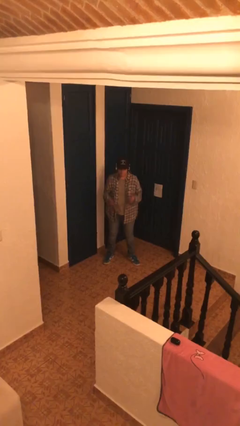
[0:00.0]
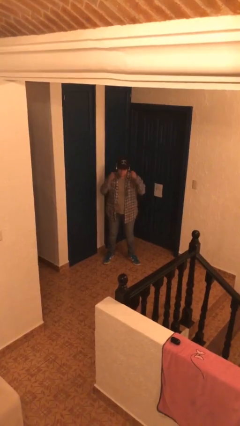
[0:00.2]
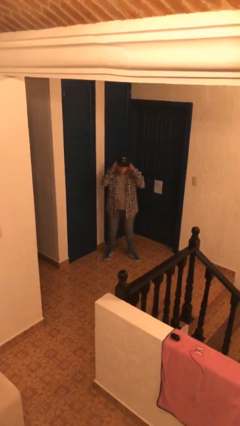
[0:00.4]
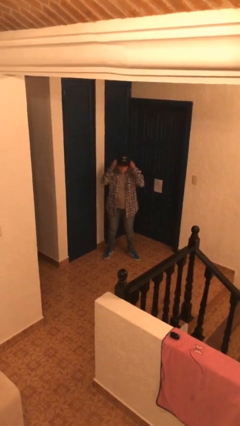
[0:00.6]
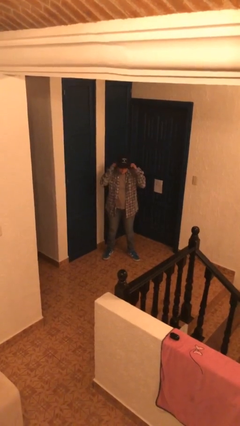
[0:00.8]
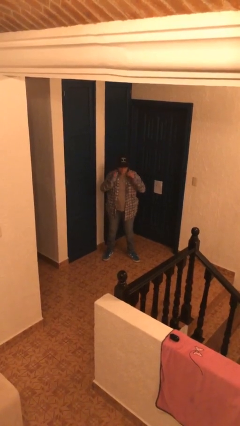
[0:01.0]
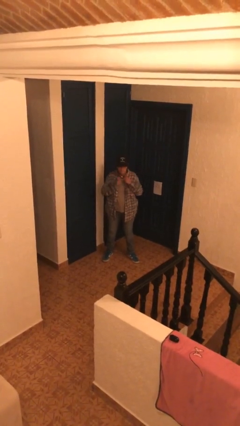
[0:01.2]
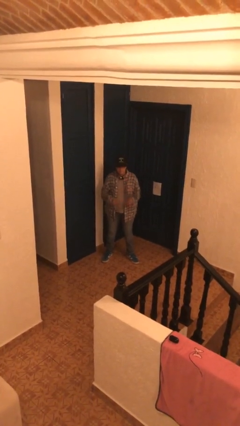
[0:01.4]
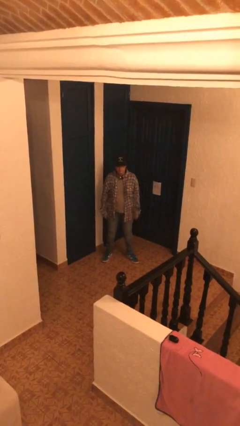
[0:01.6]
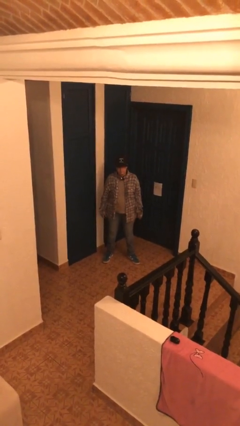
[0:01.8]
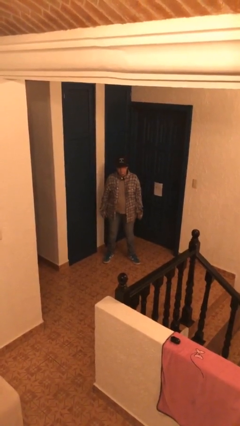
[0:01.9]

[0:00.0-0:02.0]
person takes off headphones

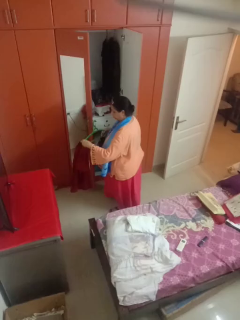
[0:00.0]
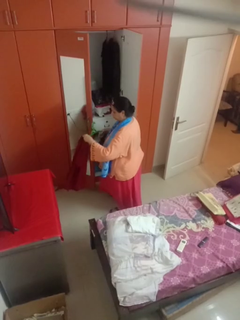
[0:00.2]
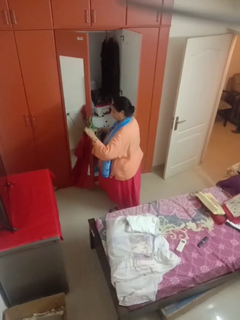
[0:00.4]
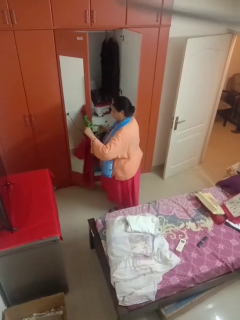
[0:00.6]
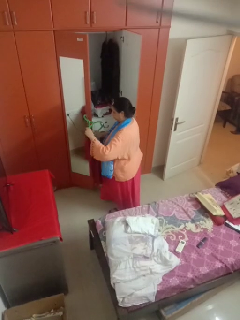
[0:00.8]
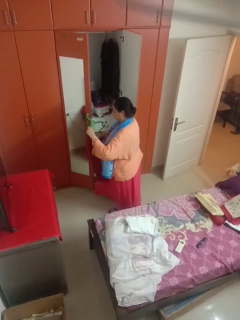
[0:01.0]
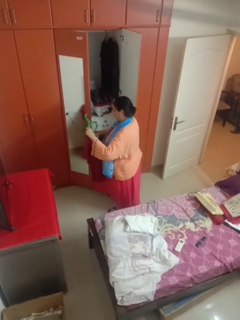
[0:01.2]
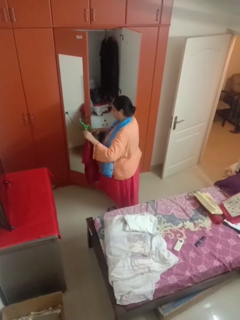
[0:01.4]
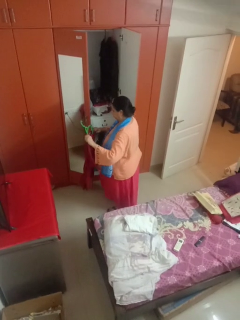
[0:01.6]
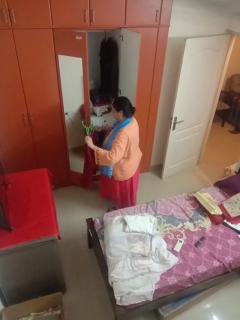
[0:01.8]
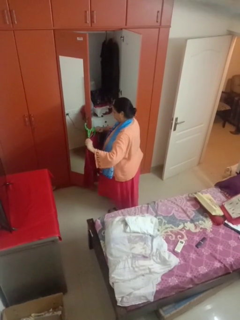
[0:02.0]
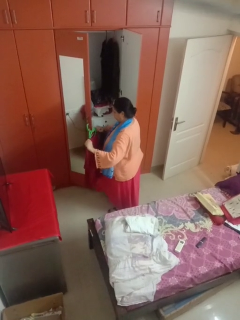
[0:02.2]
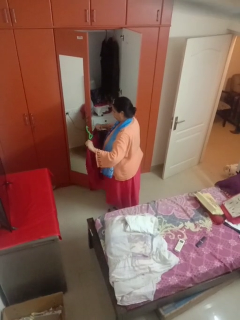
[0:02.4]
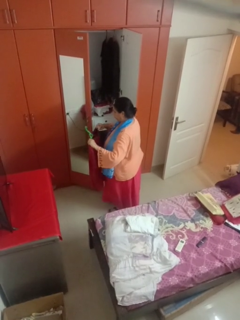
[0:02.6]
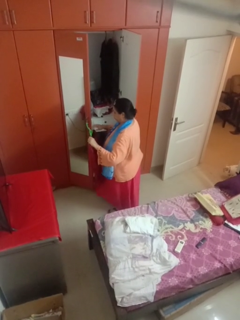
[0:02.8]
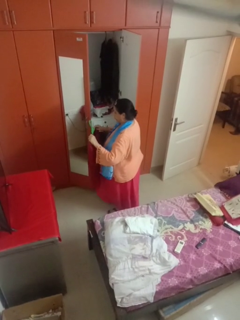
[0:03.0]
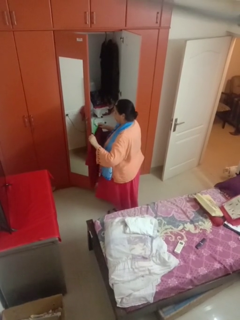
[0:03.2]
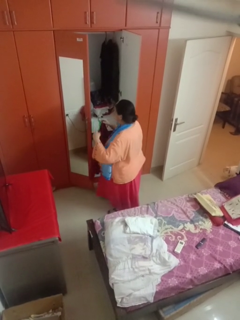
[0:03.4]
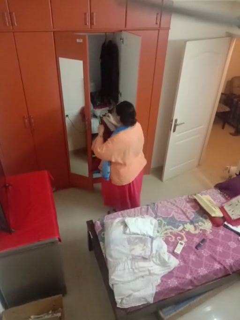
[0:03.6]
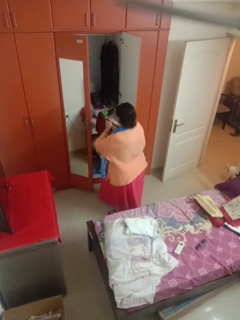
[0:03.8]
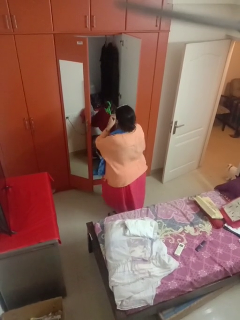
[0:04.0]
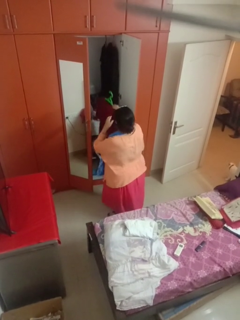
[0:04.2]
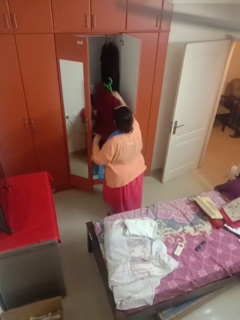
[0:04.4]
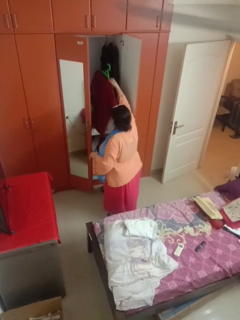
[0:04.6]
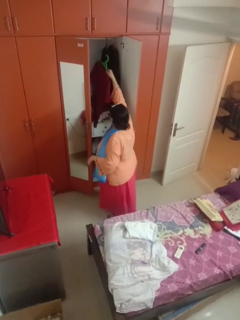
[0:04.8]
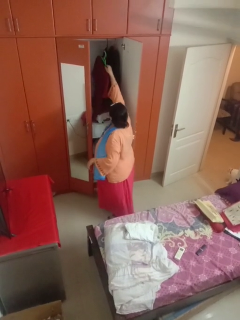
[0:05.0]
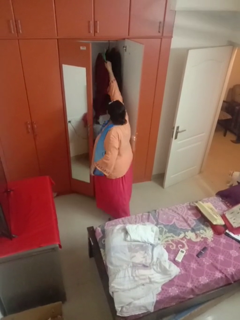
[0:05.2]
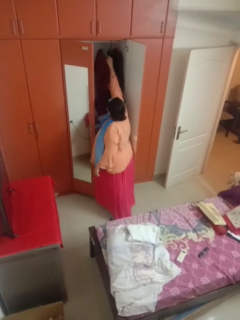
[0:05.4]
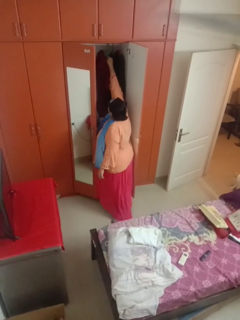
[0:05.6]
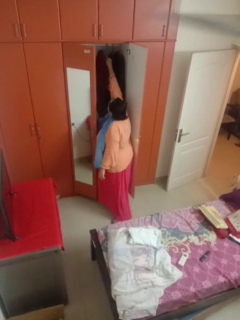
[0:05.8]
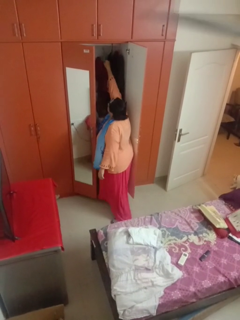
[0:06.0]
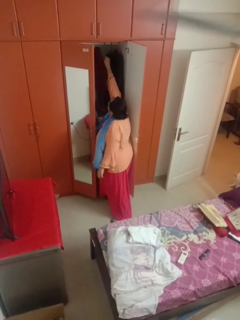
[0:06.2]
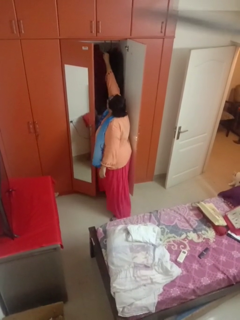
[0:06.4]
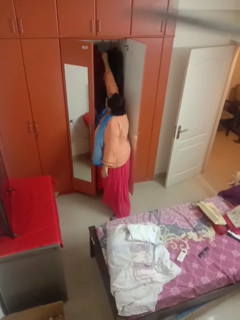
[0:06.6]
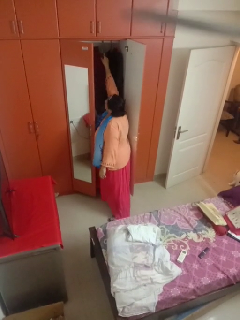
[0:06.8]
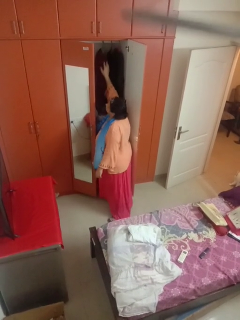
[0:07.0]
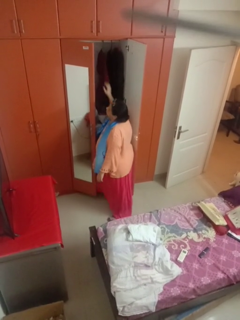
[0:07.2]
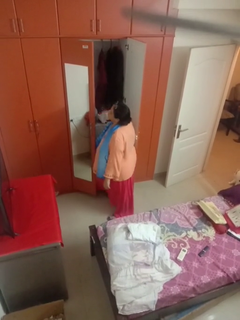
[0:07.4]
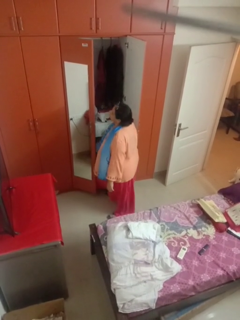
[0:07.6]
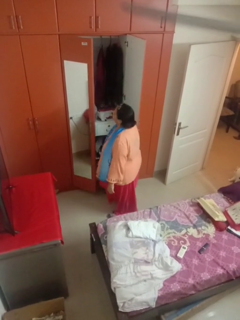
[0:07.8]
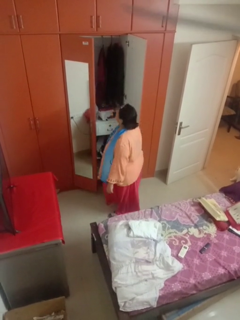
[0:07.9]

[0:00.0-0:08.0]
person puts clothes into closet

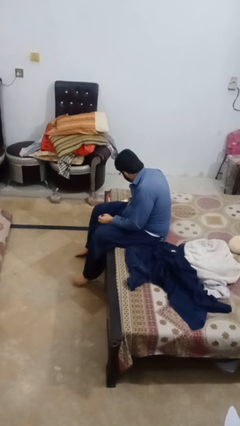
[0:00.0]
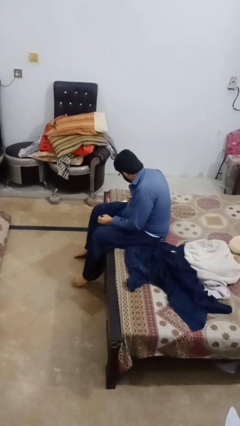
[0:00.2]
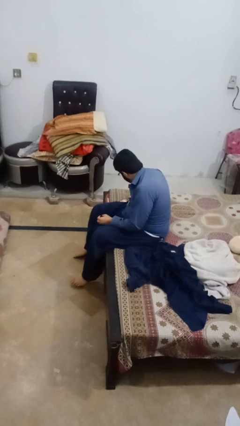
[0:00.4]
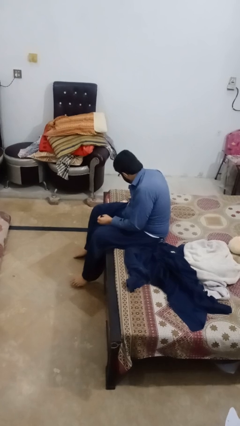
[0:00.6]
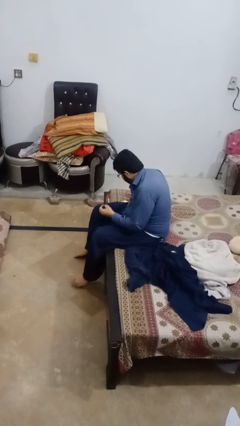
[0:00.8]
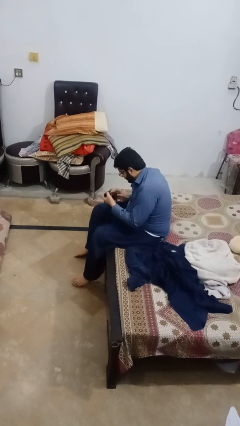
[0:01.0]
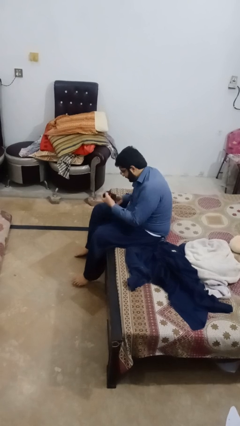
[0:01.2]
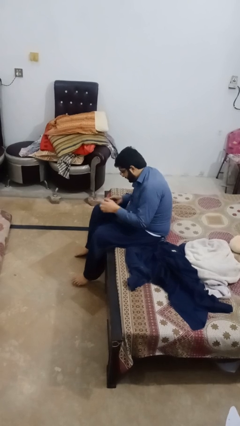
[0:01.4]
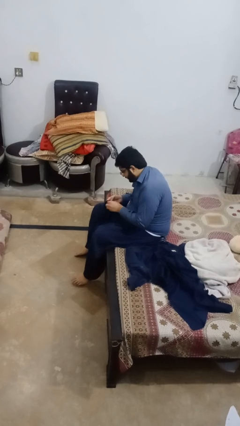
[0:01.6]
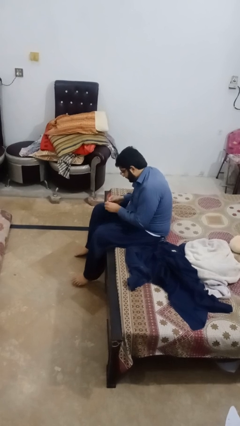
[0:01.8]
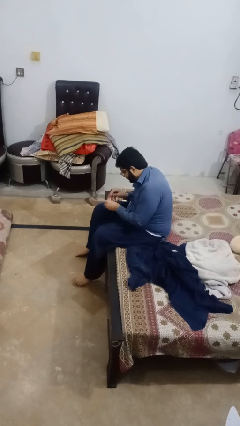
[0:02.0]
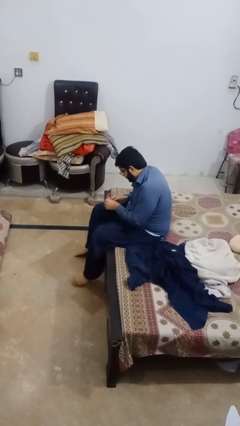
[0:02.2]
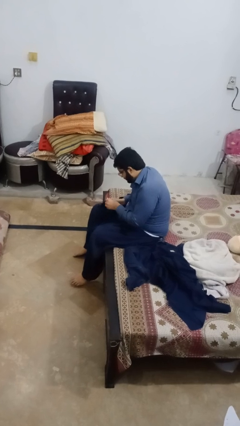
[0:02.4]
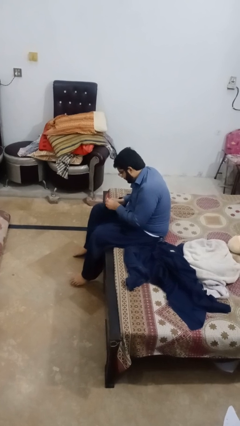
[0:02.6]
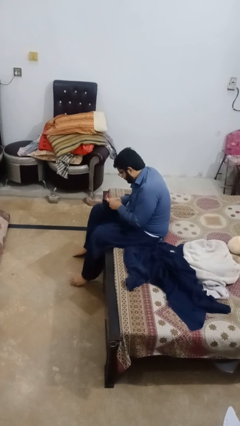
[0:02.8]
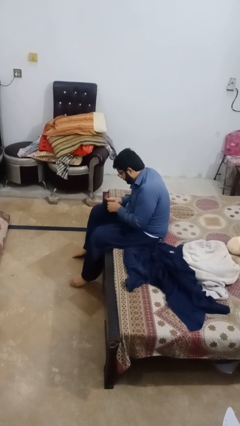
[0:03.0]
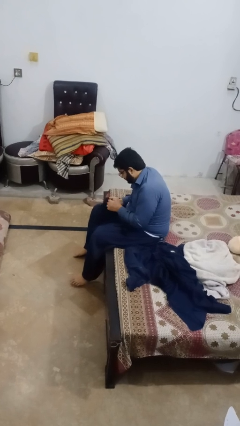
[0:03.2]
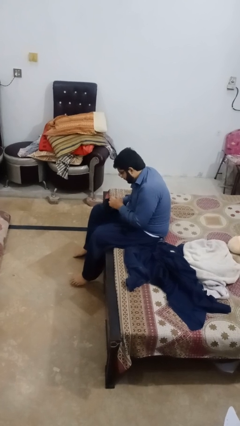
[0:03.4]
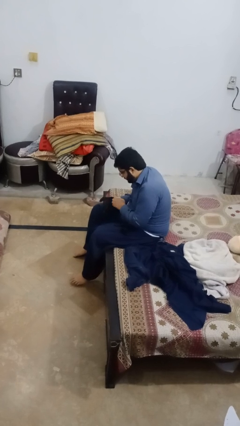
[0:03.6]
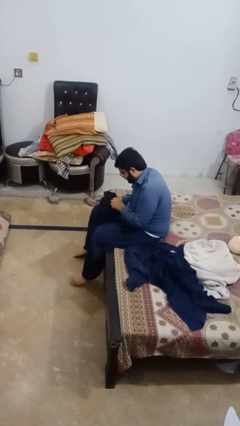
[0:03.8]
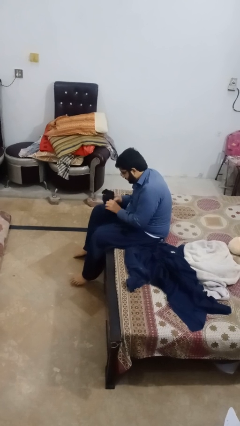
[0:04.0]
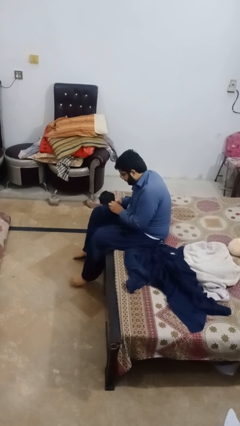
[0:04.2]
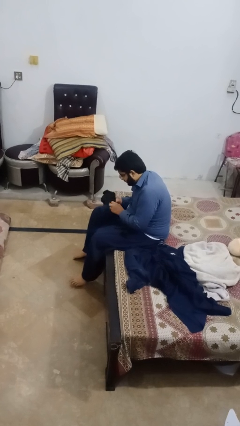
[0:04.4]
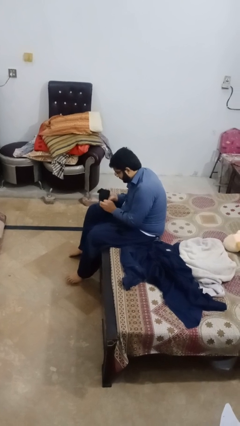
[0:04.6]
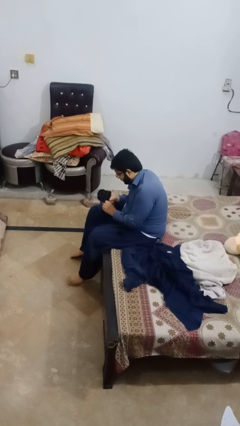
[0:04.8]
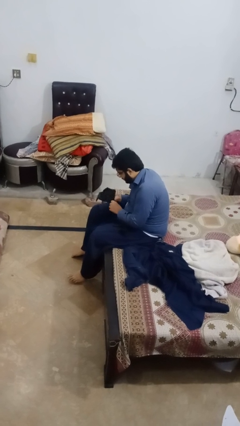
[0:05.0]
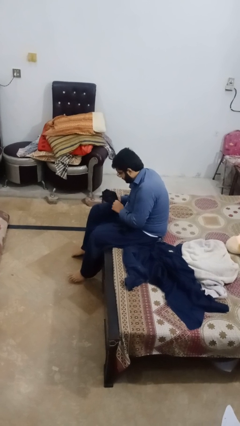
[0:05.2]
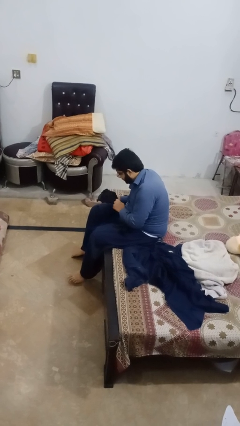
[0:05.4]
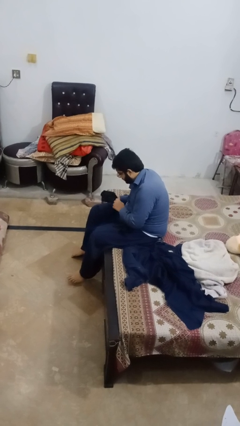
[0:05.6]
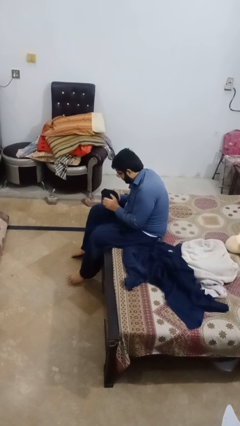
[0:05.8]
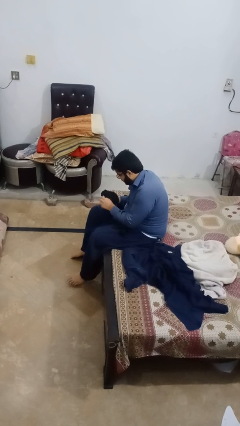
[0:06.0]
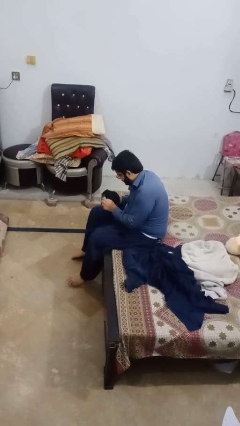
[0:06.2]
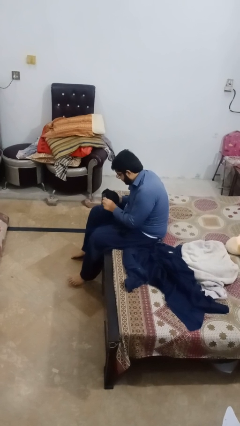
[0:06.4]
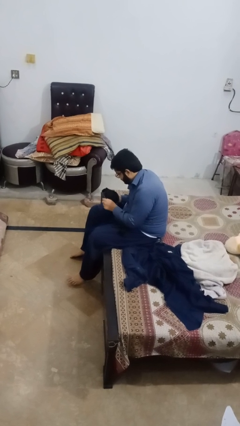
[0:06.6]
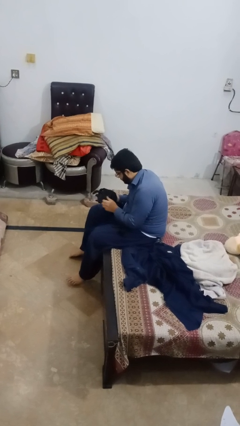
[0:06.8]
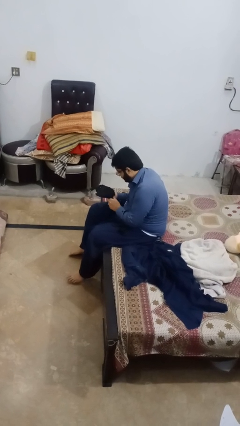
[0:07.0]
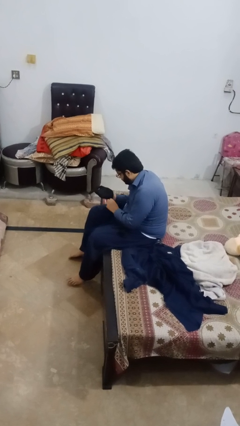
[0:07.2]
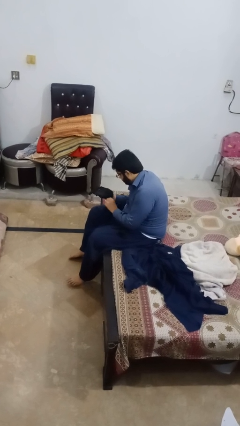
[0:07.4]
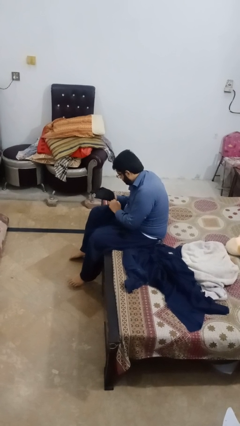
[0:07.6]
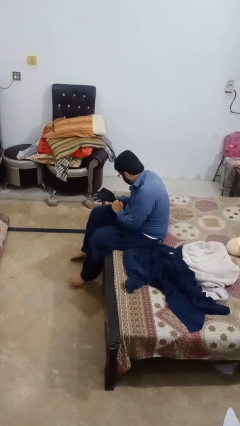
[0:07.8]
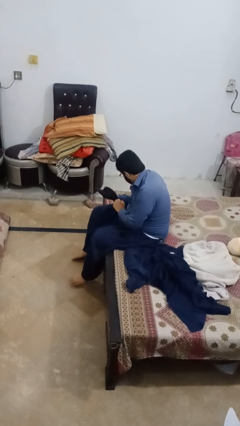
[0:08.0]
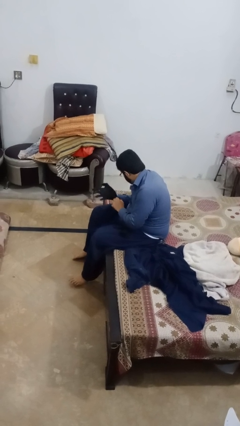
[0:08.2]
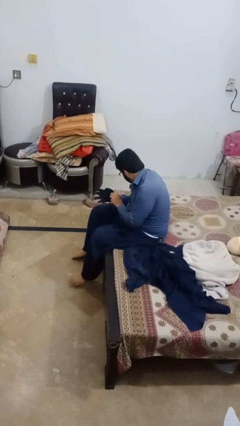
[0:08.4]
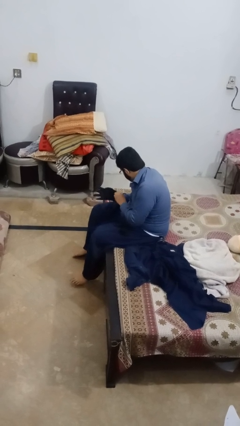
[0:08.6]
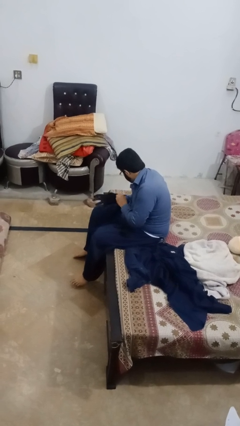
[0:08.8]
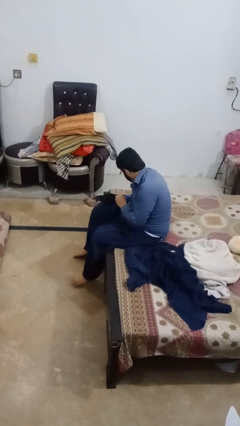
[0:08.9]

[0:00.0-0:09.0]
person puts on gloves

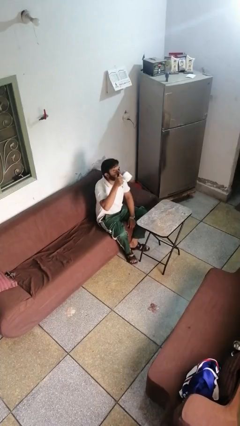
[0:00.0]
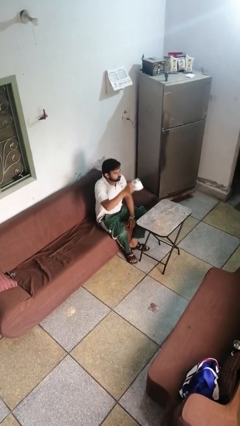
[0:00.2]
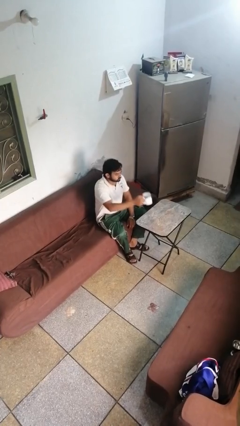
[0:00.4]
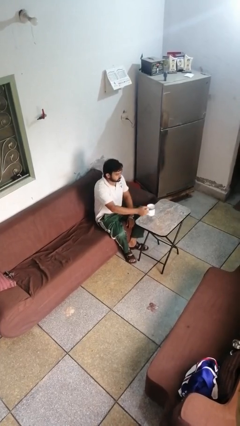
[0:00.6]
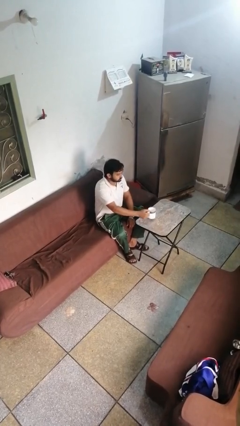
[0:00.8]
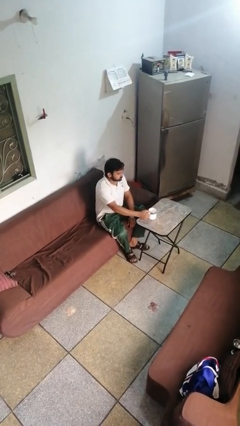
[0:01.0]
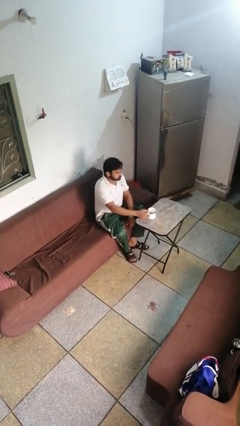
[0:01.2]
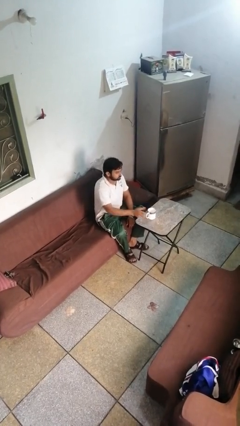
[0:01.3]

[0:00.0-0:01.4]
person puts down object on table
